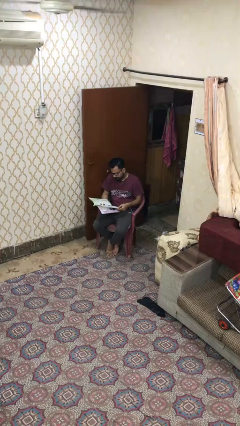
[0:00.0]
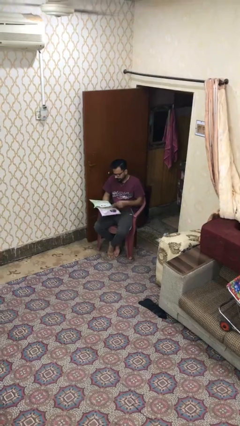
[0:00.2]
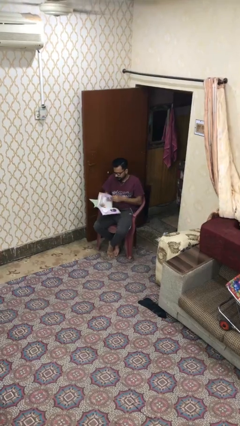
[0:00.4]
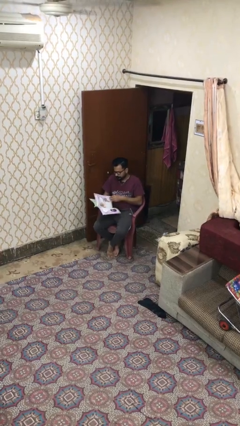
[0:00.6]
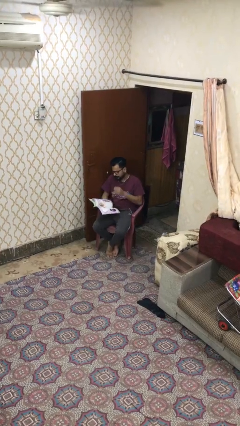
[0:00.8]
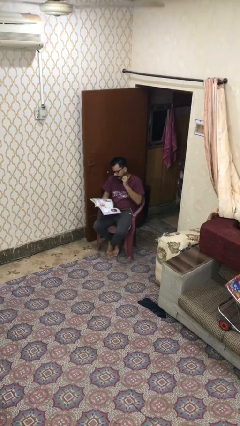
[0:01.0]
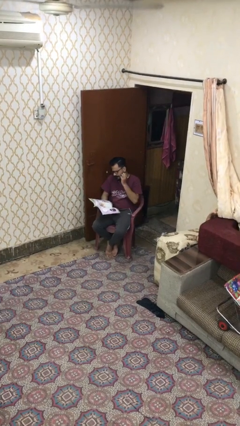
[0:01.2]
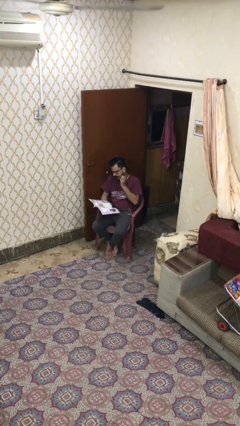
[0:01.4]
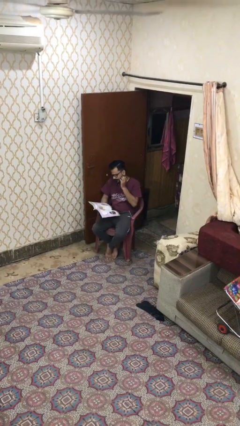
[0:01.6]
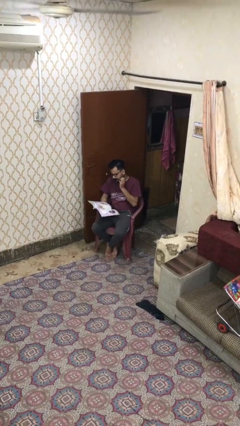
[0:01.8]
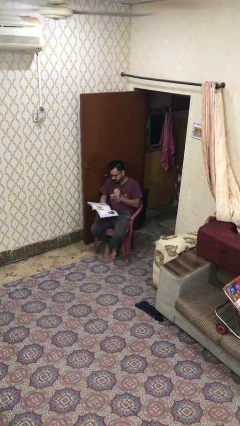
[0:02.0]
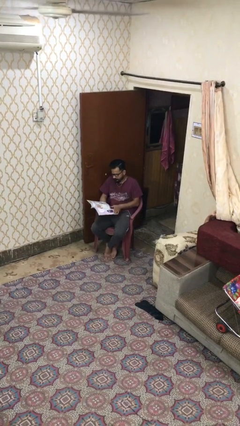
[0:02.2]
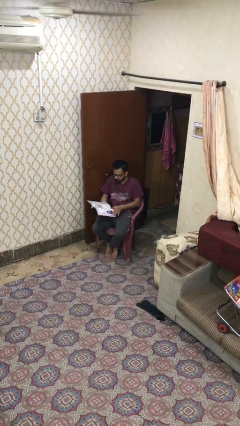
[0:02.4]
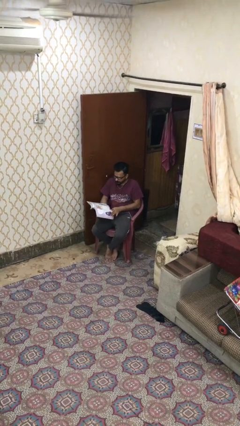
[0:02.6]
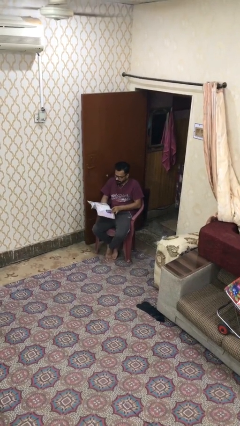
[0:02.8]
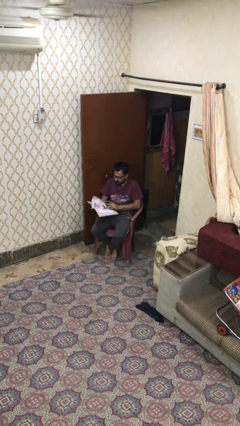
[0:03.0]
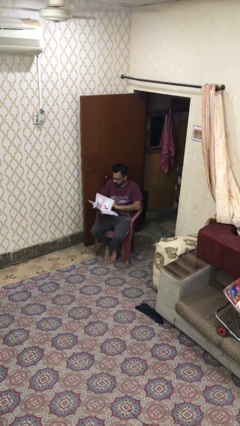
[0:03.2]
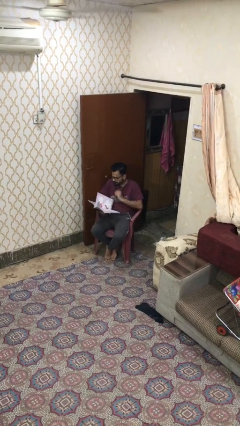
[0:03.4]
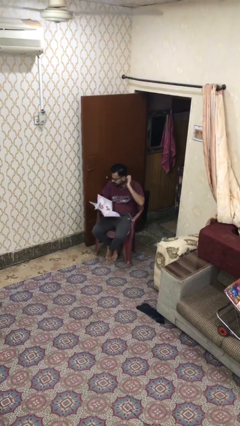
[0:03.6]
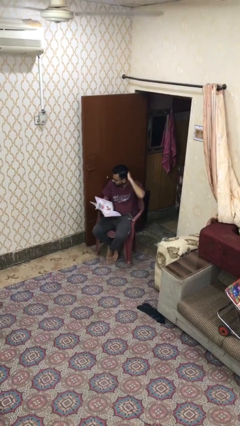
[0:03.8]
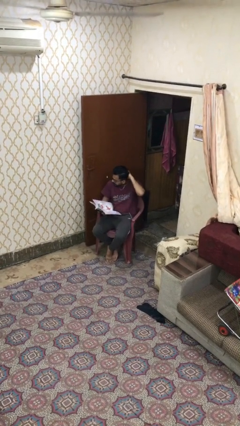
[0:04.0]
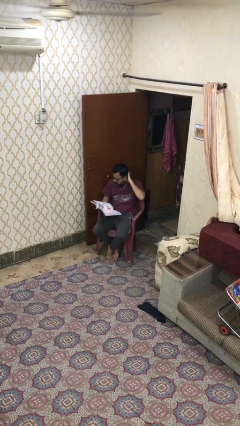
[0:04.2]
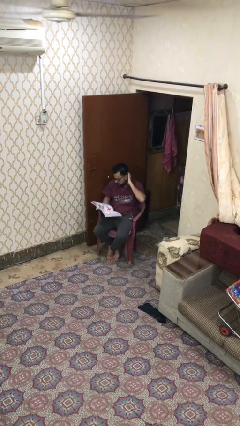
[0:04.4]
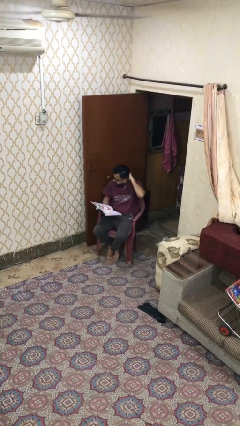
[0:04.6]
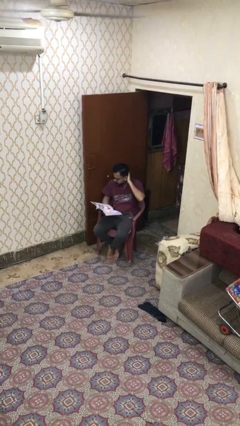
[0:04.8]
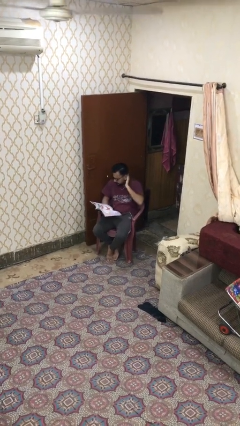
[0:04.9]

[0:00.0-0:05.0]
person reads document

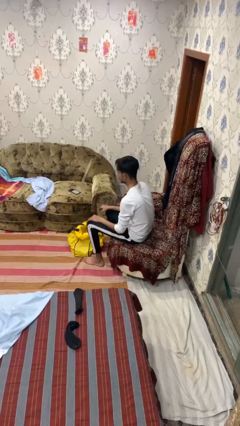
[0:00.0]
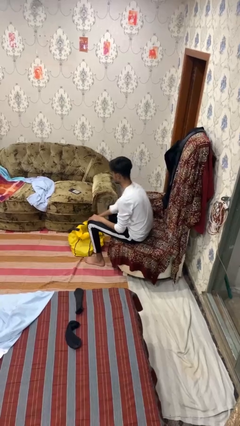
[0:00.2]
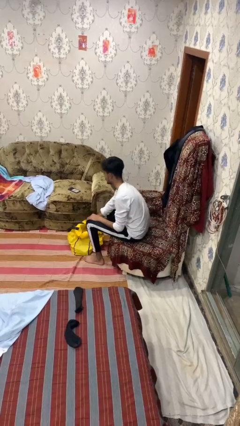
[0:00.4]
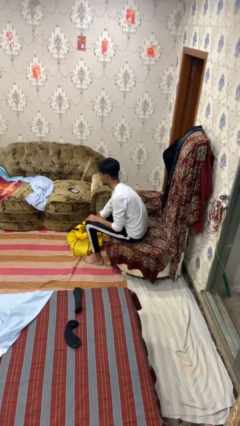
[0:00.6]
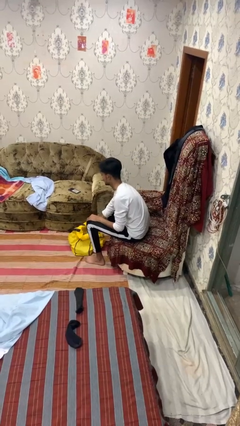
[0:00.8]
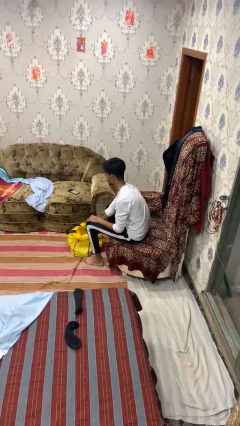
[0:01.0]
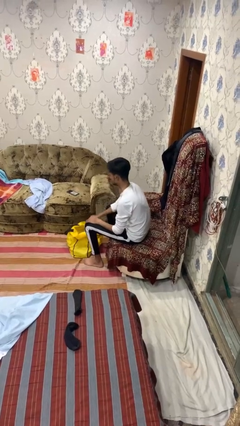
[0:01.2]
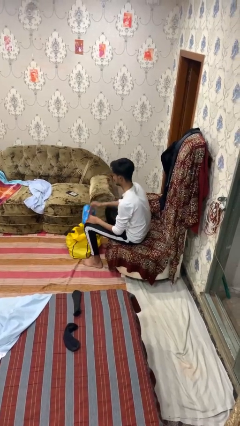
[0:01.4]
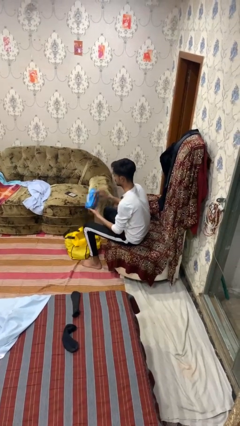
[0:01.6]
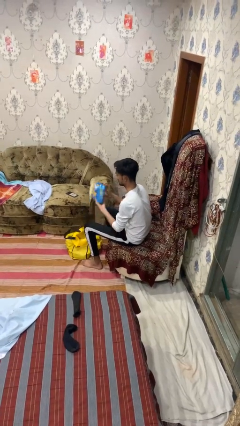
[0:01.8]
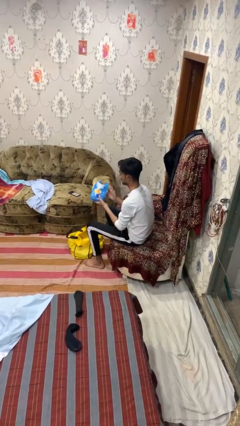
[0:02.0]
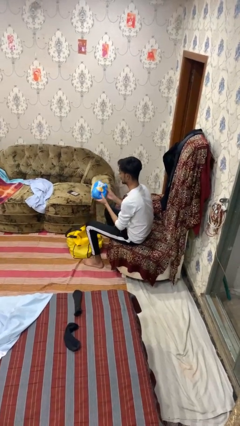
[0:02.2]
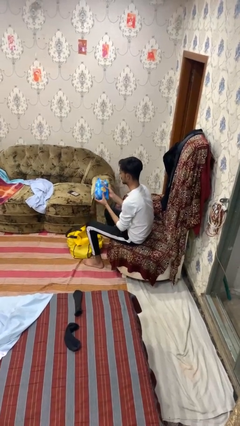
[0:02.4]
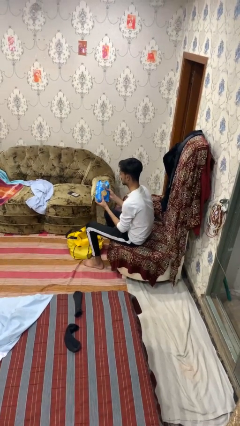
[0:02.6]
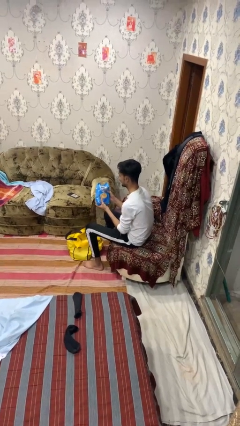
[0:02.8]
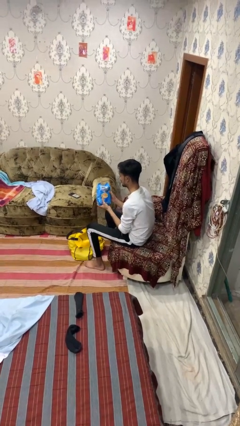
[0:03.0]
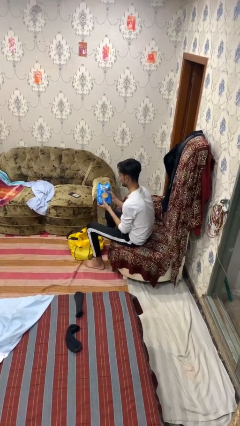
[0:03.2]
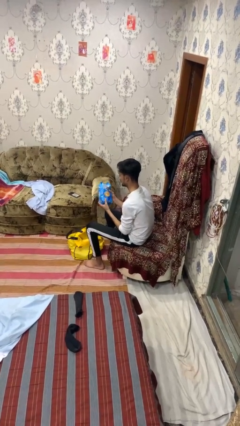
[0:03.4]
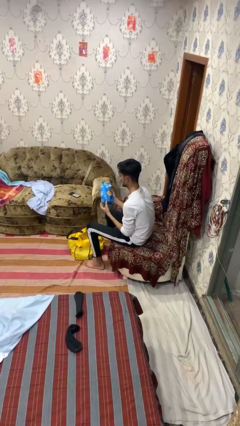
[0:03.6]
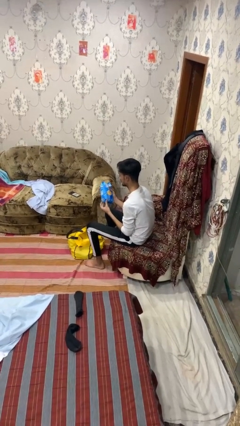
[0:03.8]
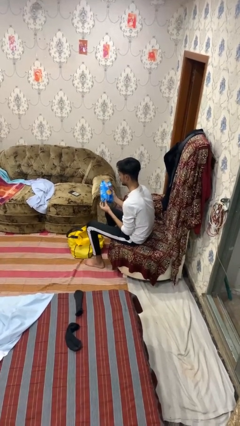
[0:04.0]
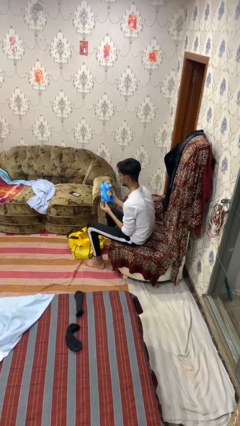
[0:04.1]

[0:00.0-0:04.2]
person takes object from bag

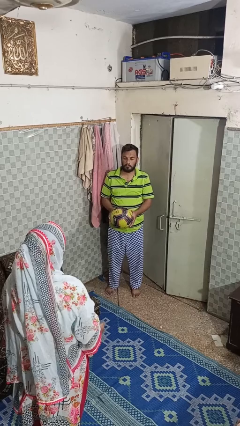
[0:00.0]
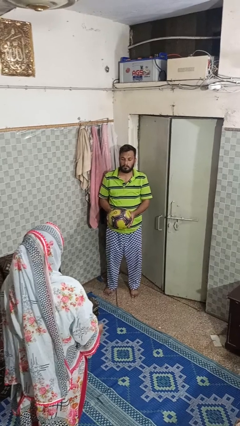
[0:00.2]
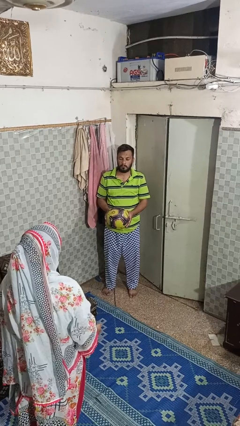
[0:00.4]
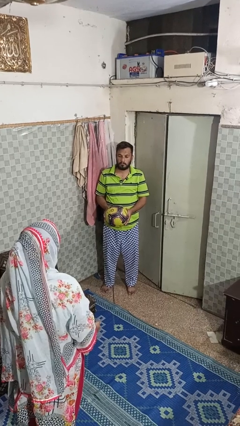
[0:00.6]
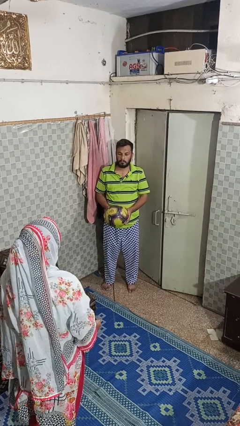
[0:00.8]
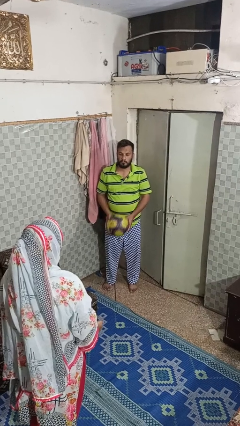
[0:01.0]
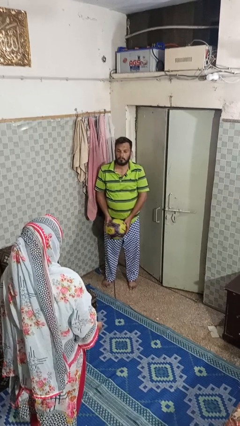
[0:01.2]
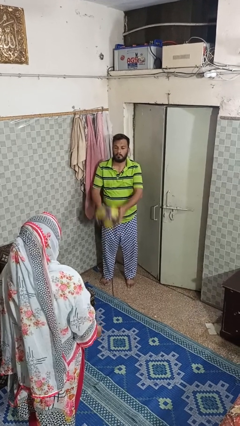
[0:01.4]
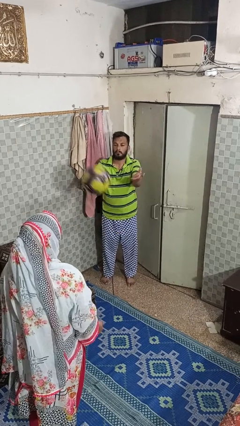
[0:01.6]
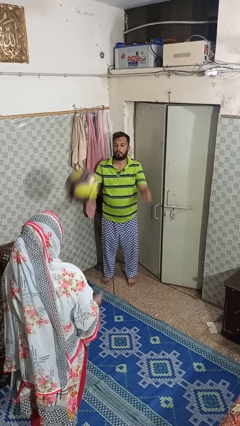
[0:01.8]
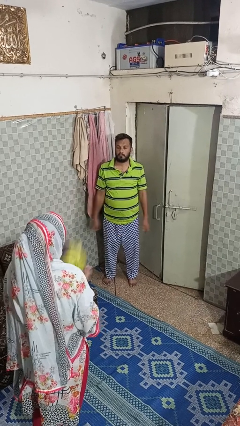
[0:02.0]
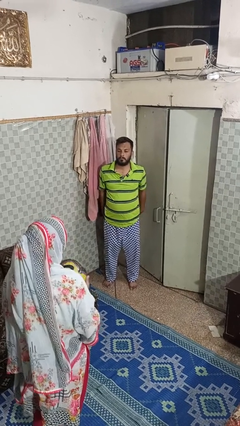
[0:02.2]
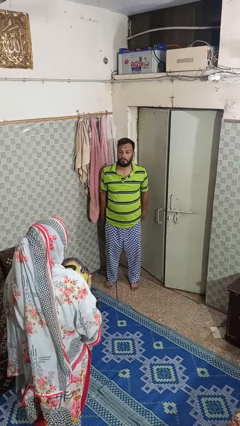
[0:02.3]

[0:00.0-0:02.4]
person throws object to person

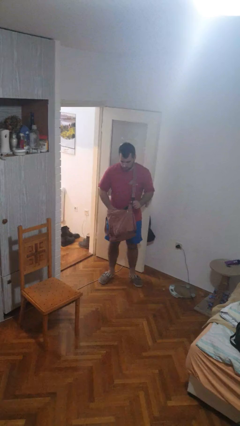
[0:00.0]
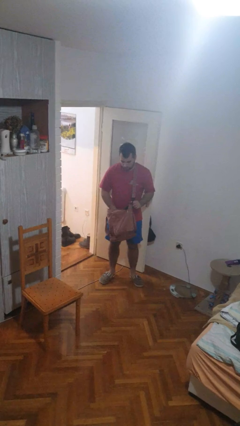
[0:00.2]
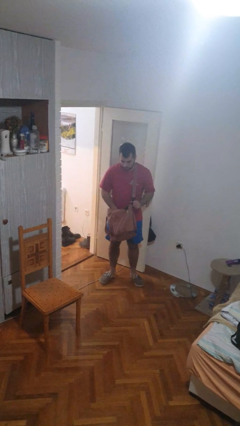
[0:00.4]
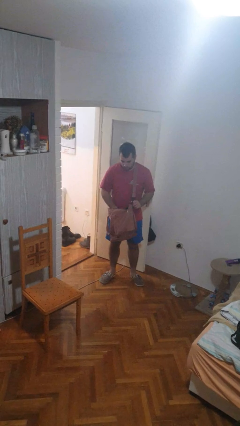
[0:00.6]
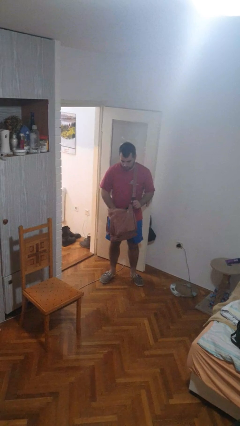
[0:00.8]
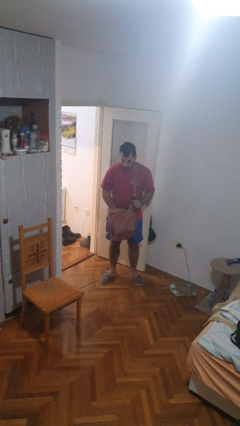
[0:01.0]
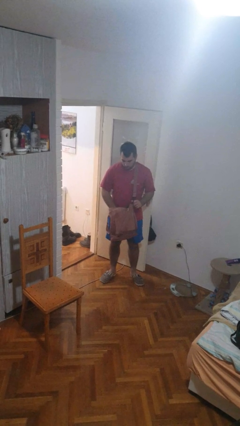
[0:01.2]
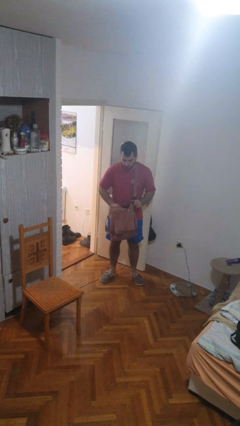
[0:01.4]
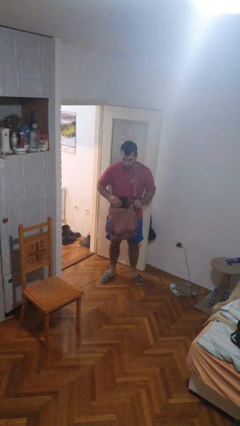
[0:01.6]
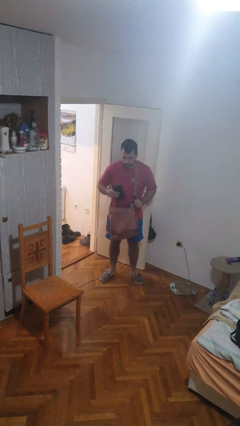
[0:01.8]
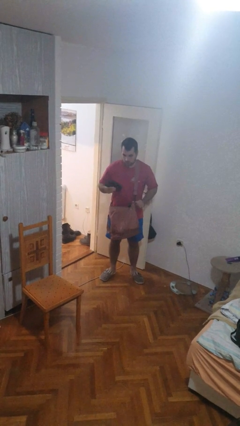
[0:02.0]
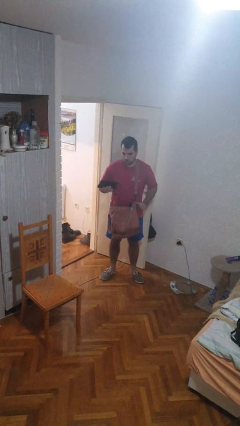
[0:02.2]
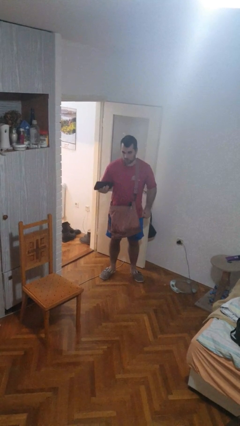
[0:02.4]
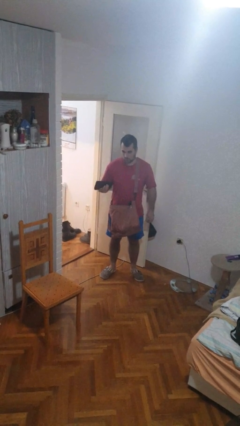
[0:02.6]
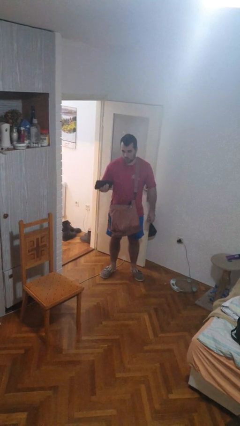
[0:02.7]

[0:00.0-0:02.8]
person takes object from purse

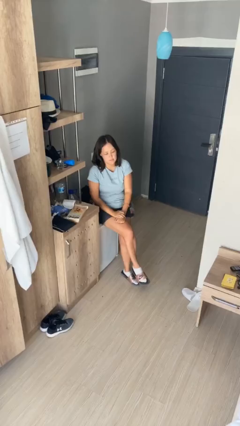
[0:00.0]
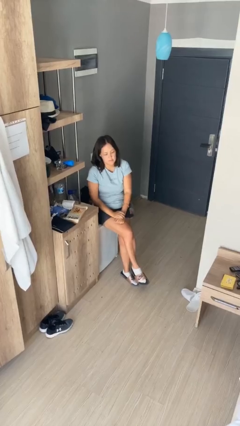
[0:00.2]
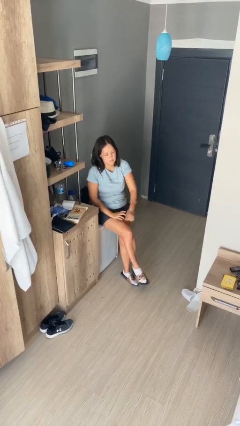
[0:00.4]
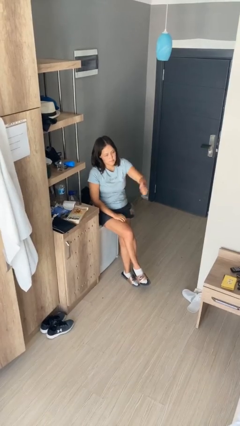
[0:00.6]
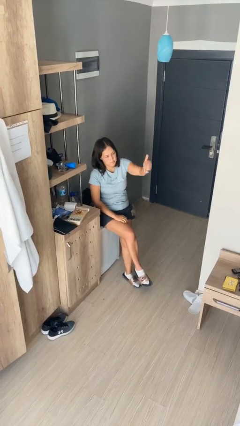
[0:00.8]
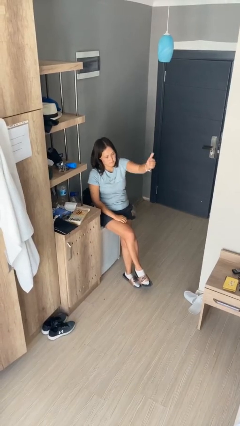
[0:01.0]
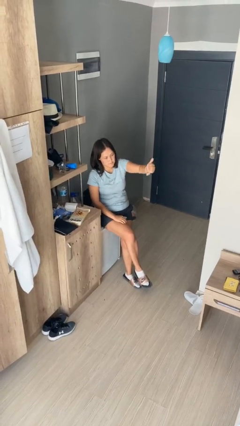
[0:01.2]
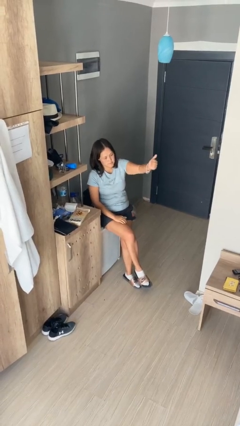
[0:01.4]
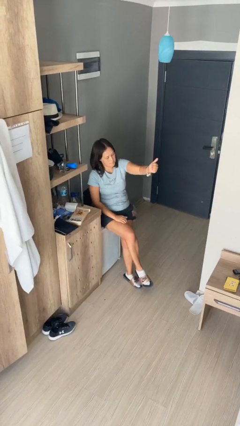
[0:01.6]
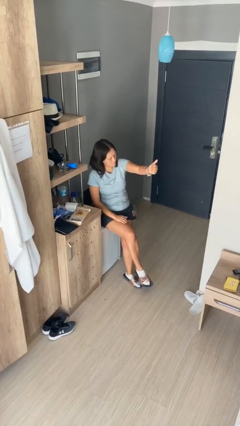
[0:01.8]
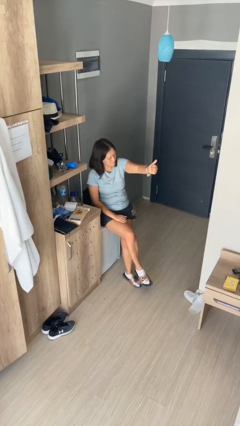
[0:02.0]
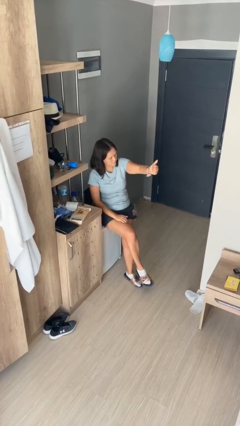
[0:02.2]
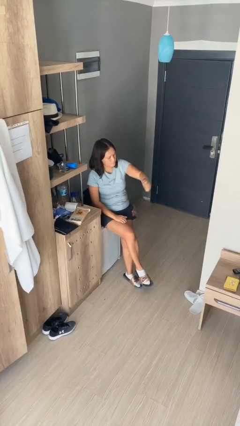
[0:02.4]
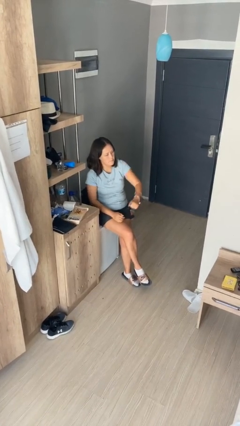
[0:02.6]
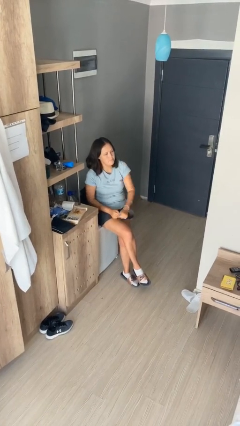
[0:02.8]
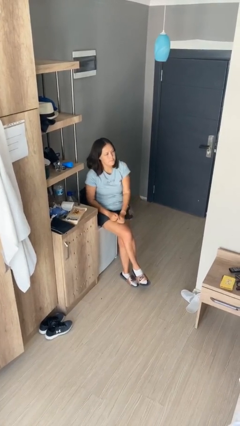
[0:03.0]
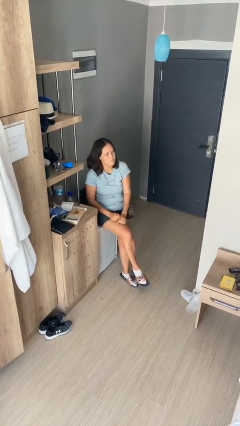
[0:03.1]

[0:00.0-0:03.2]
person gestures thumbs up
